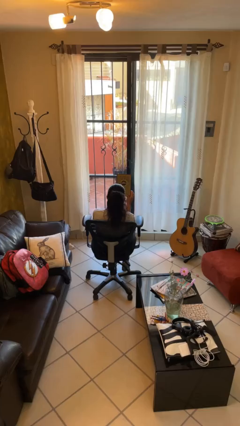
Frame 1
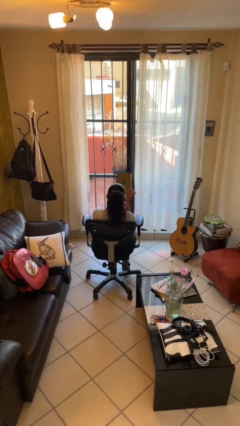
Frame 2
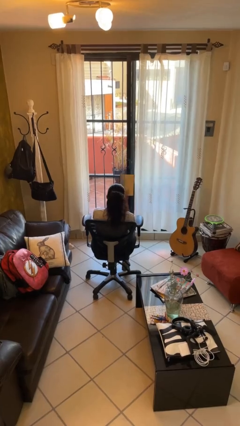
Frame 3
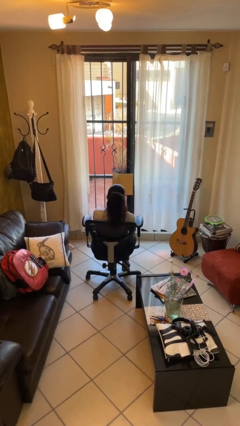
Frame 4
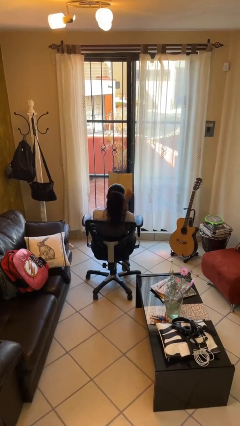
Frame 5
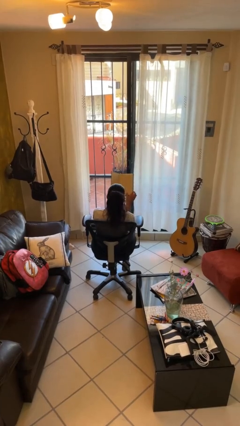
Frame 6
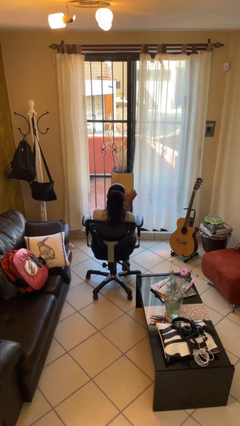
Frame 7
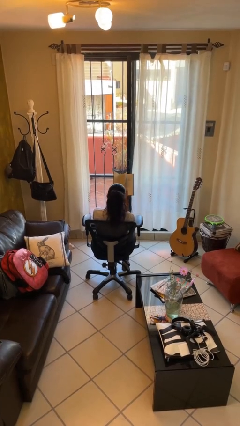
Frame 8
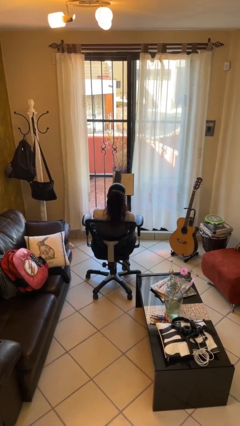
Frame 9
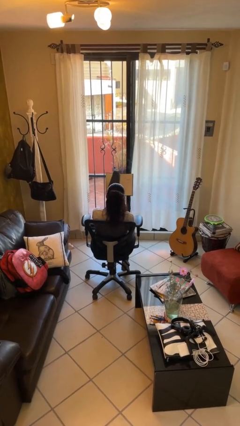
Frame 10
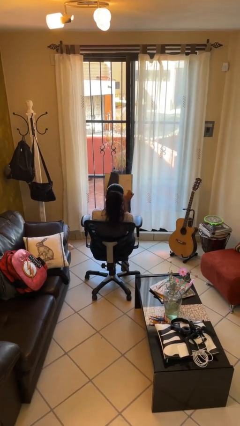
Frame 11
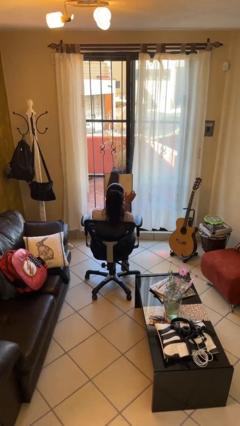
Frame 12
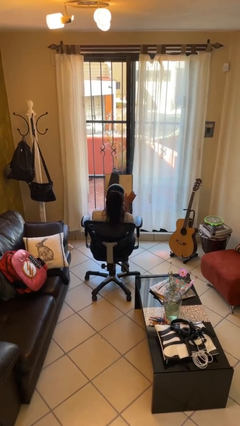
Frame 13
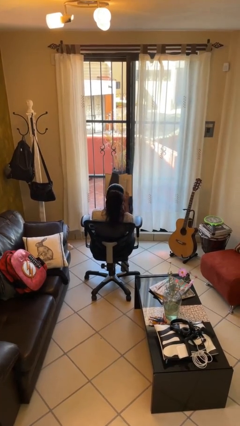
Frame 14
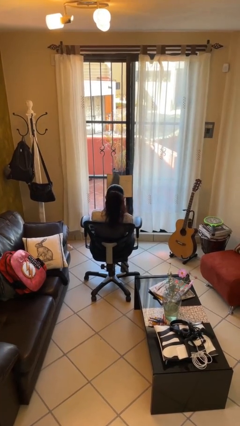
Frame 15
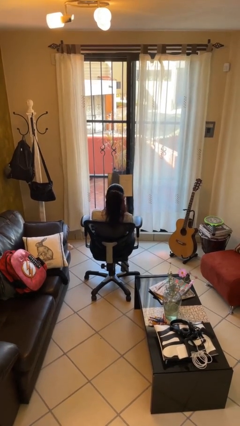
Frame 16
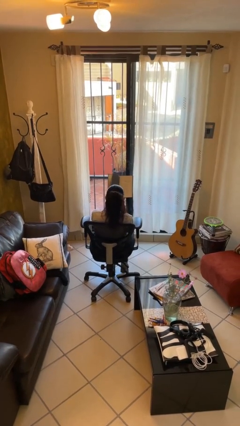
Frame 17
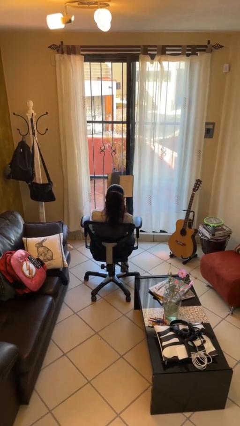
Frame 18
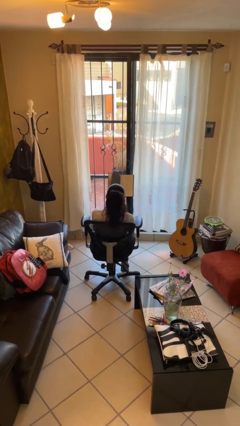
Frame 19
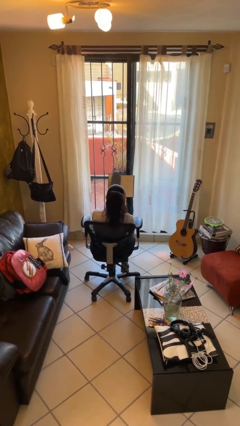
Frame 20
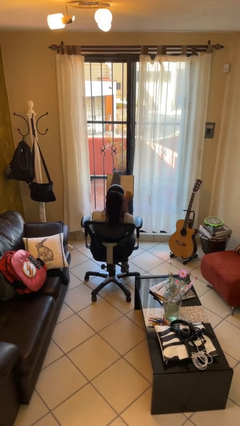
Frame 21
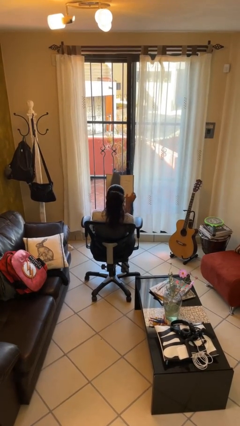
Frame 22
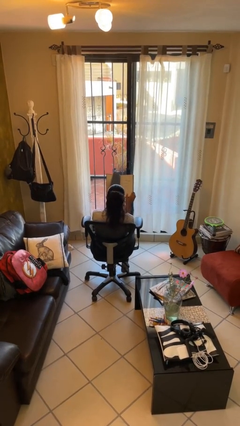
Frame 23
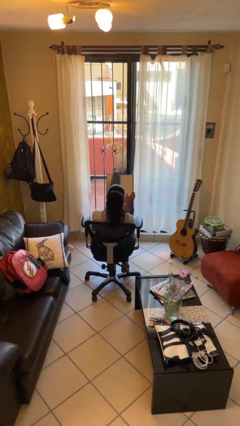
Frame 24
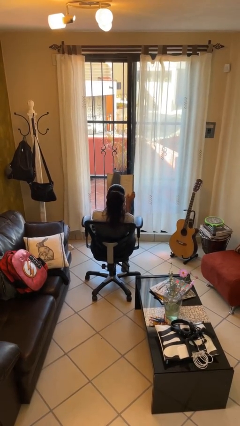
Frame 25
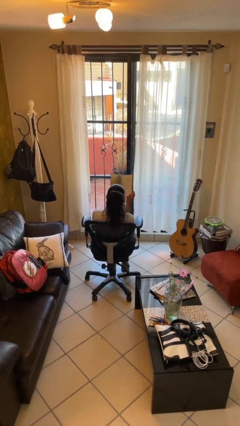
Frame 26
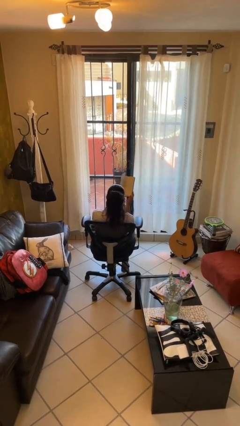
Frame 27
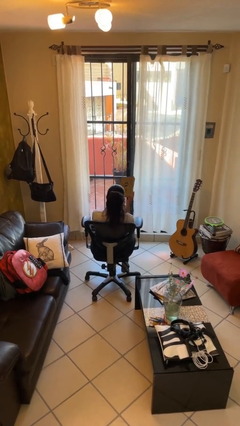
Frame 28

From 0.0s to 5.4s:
person reads book

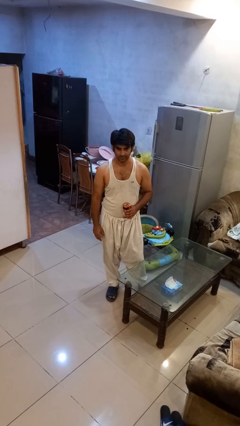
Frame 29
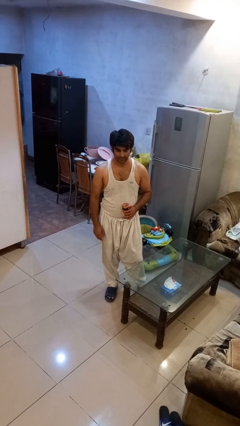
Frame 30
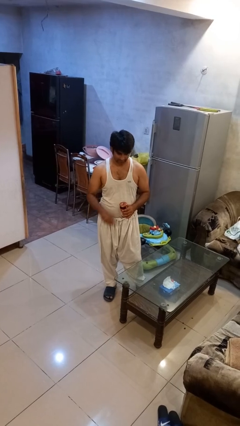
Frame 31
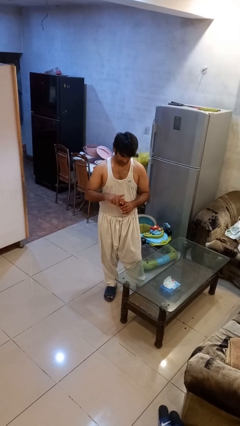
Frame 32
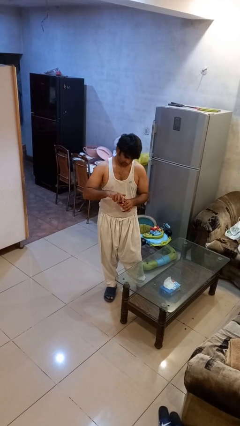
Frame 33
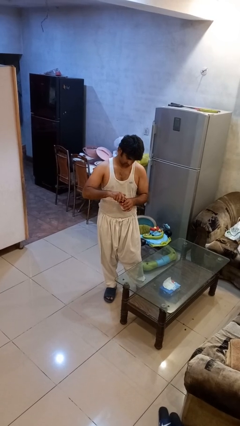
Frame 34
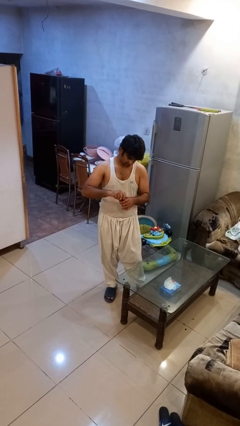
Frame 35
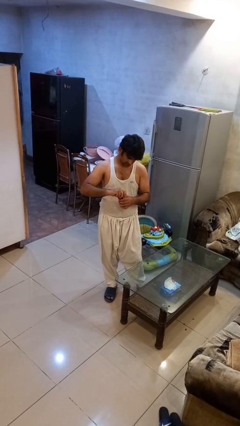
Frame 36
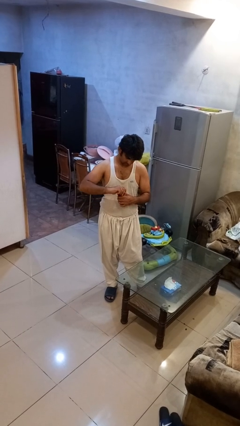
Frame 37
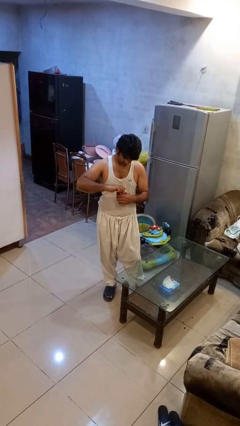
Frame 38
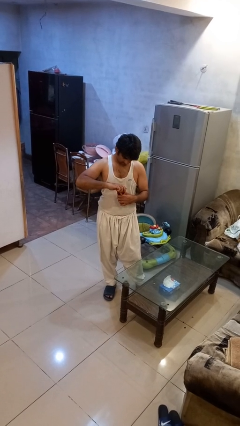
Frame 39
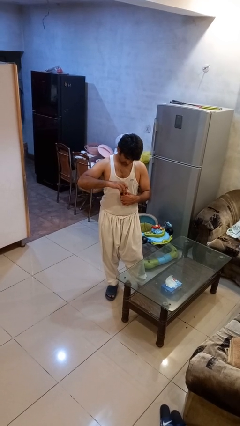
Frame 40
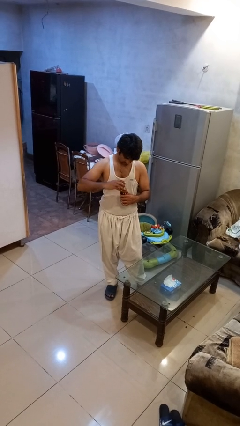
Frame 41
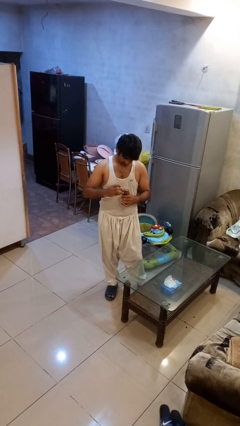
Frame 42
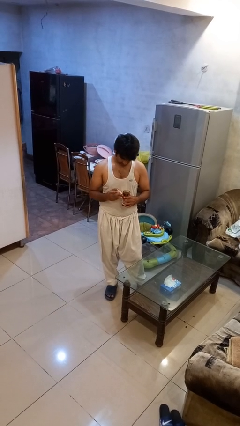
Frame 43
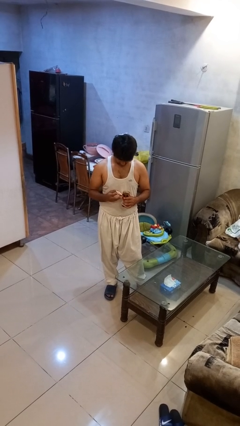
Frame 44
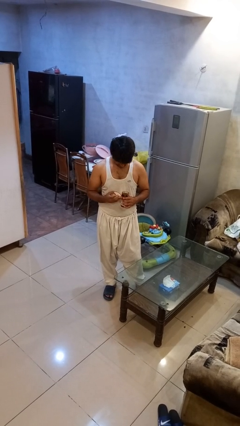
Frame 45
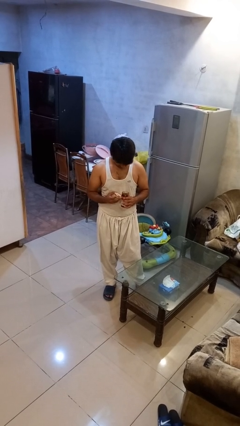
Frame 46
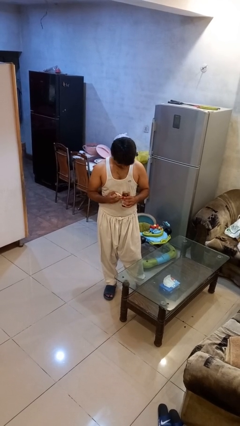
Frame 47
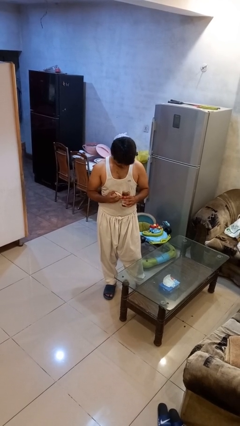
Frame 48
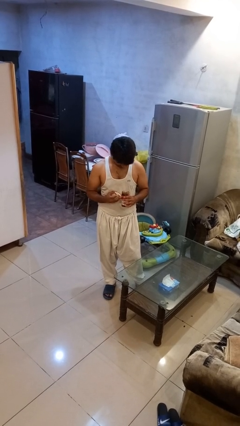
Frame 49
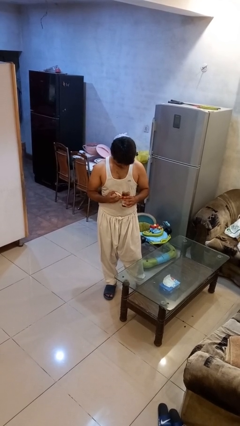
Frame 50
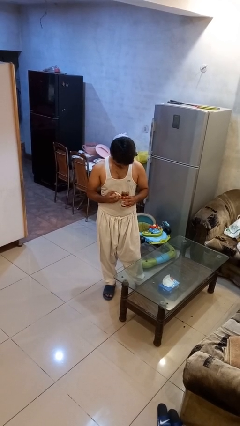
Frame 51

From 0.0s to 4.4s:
person opens jar

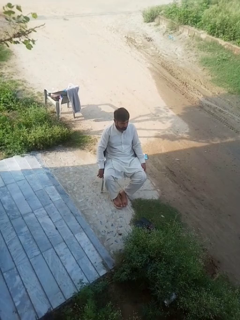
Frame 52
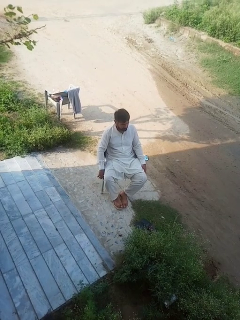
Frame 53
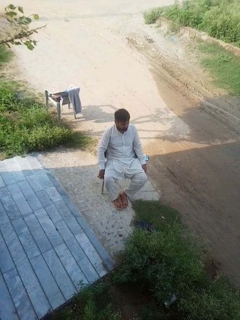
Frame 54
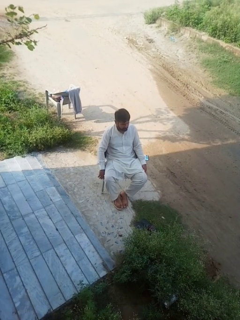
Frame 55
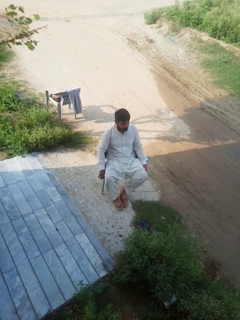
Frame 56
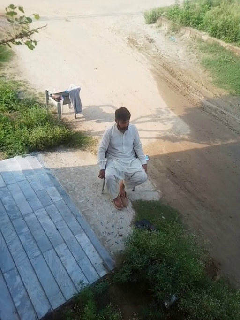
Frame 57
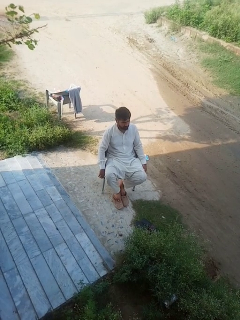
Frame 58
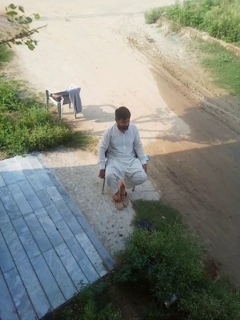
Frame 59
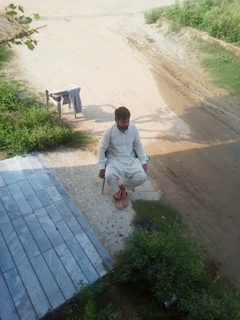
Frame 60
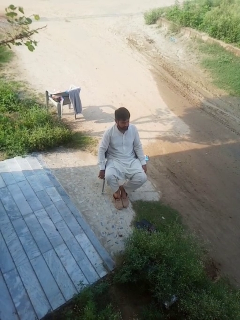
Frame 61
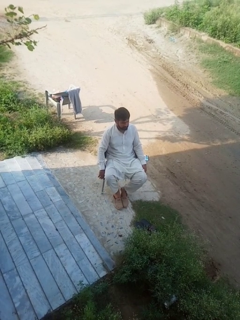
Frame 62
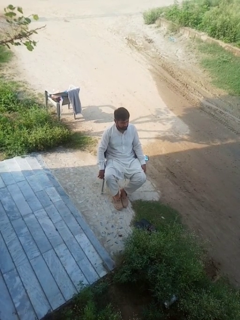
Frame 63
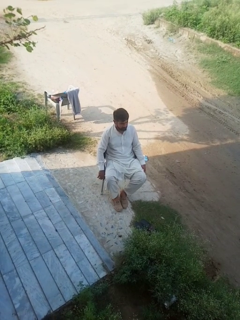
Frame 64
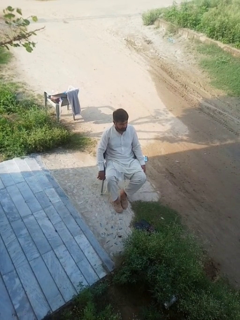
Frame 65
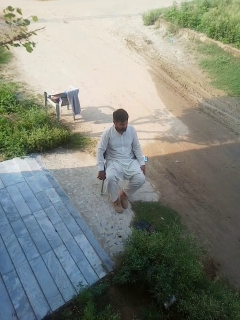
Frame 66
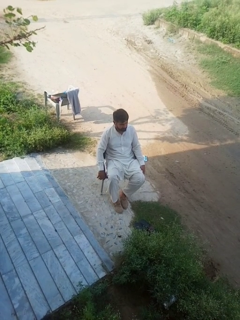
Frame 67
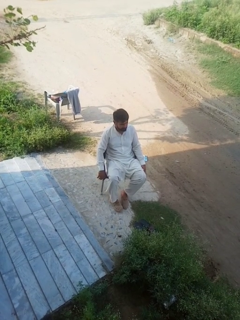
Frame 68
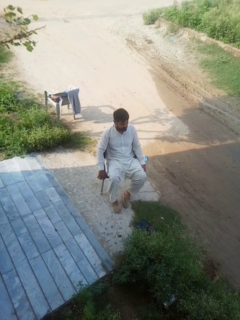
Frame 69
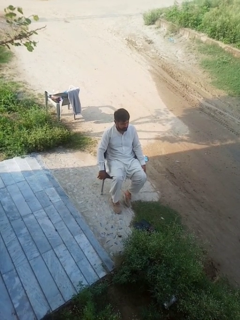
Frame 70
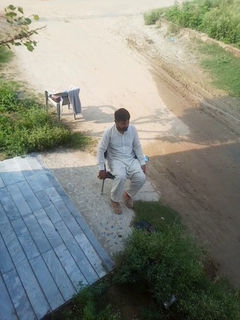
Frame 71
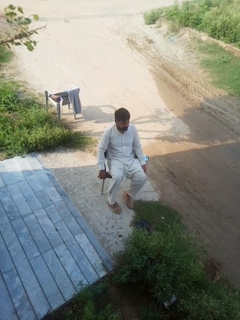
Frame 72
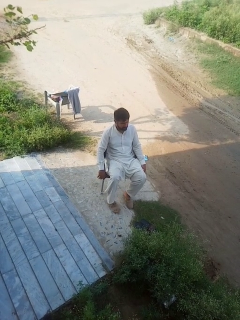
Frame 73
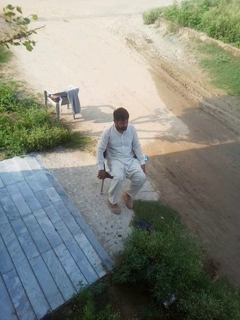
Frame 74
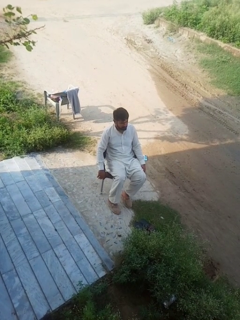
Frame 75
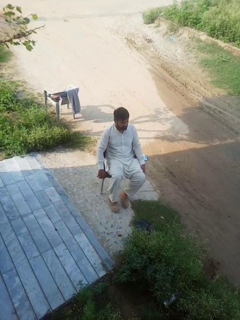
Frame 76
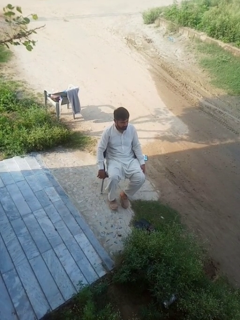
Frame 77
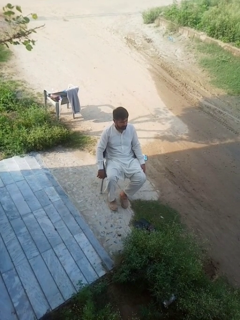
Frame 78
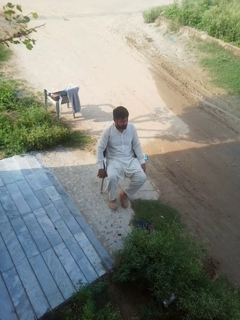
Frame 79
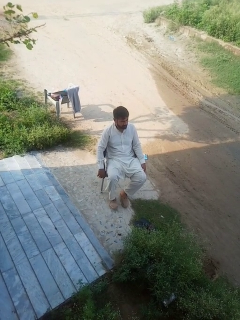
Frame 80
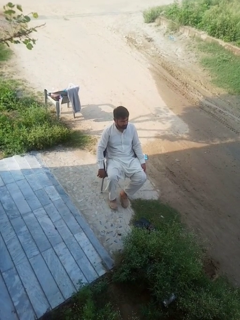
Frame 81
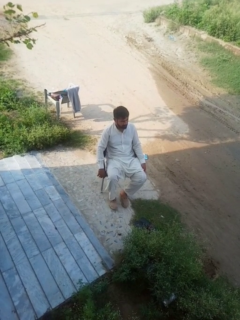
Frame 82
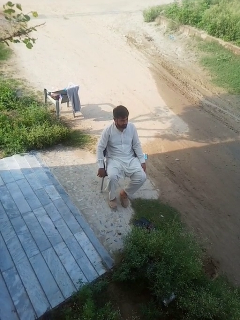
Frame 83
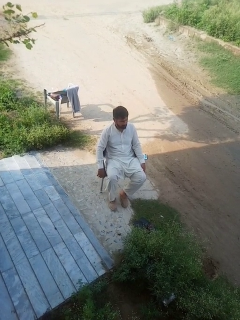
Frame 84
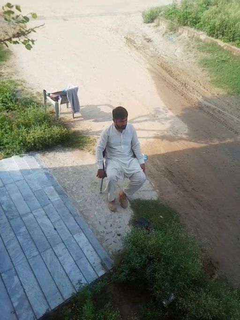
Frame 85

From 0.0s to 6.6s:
person puts on shoes

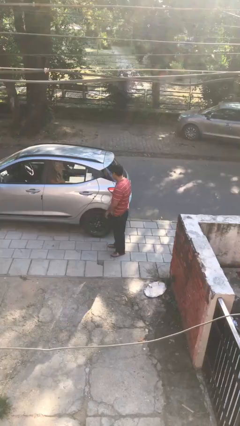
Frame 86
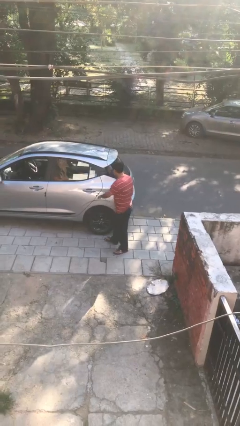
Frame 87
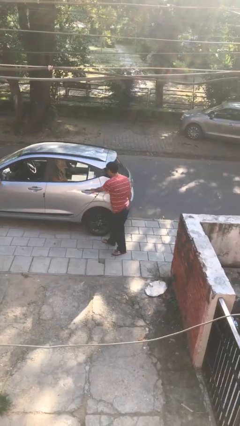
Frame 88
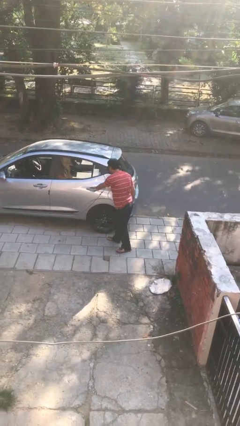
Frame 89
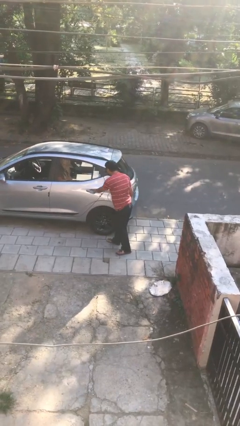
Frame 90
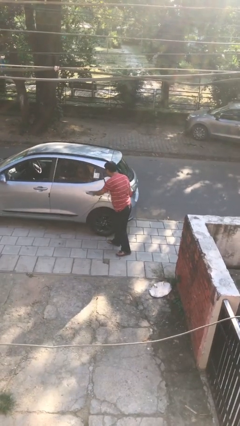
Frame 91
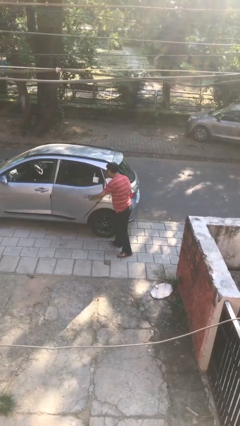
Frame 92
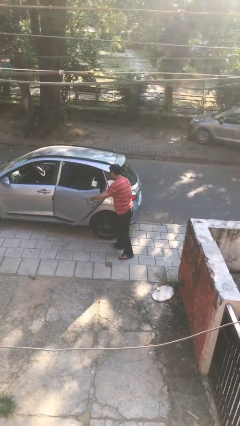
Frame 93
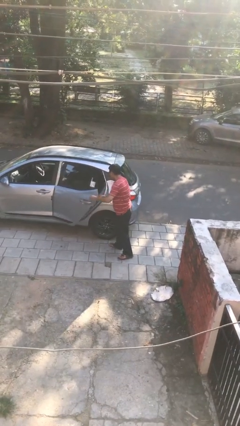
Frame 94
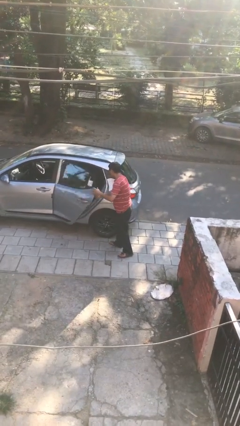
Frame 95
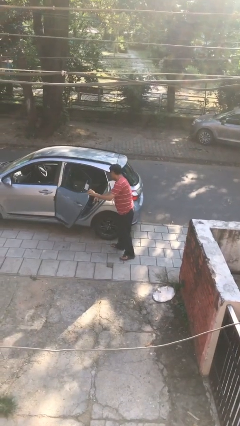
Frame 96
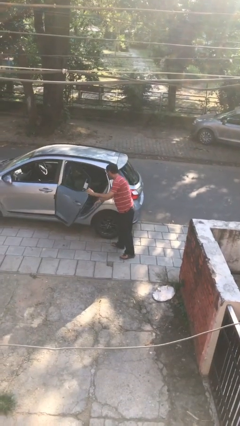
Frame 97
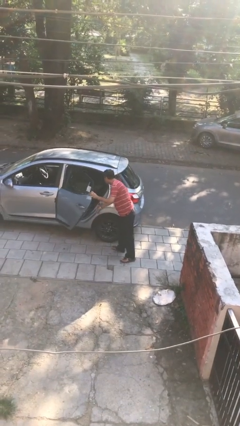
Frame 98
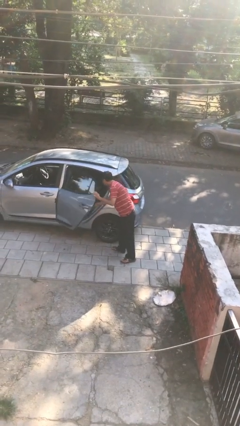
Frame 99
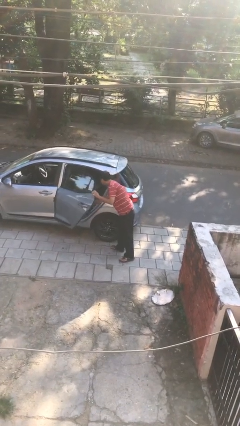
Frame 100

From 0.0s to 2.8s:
person opens car door
